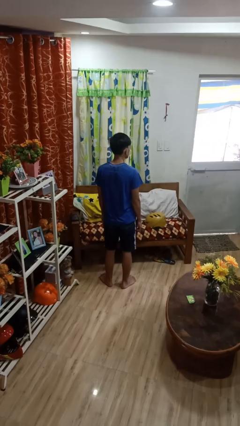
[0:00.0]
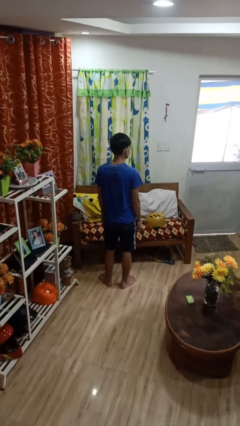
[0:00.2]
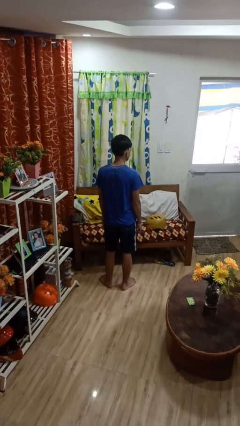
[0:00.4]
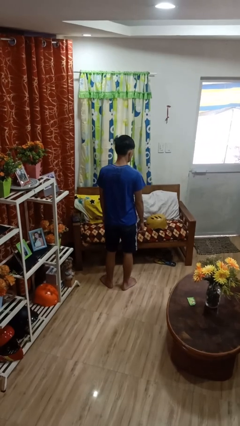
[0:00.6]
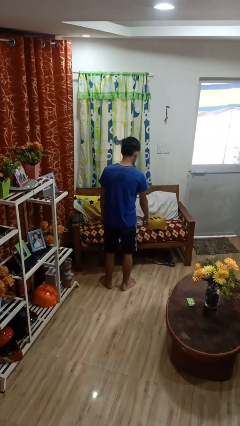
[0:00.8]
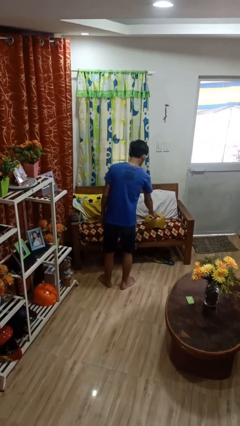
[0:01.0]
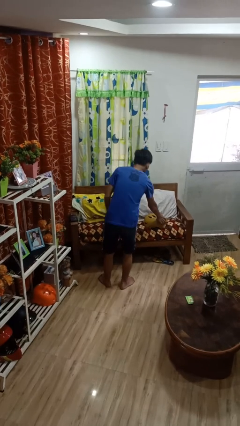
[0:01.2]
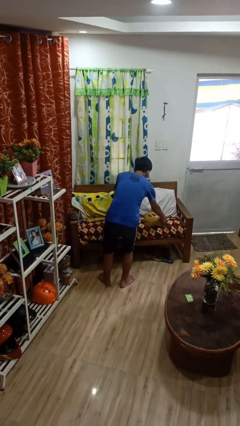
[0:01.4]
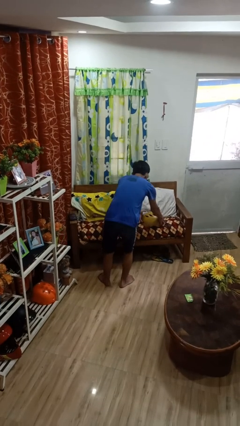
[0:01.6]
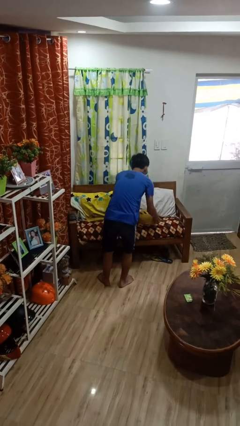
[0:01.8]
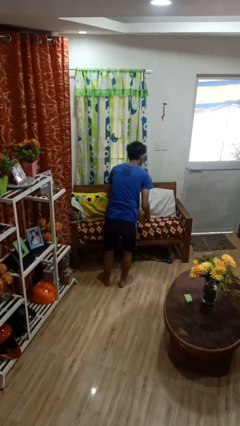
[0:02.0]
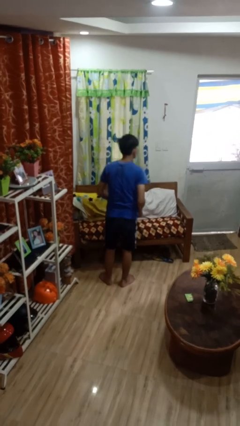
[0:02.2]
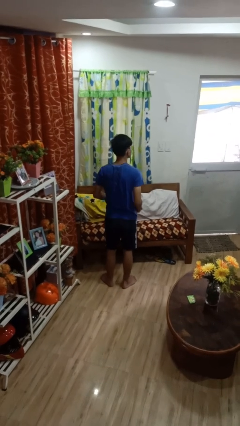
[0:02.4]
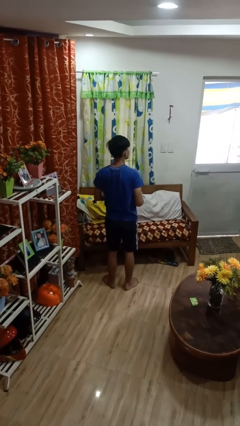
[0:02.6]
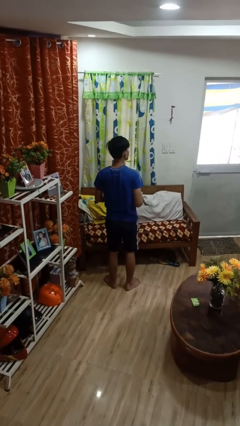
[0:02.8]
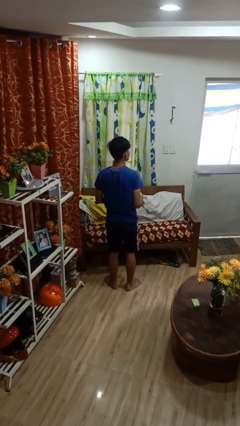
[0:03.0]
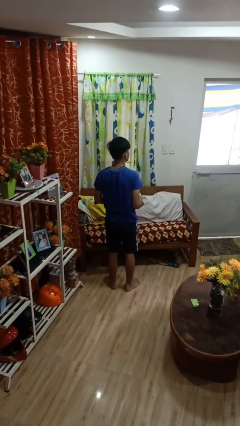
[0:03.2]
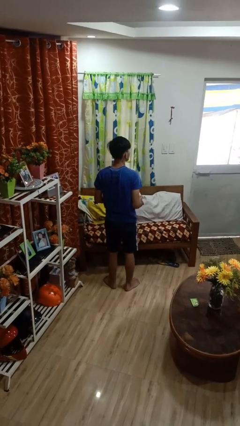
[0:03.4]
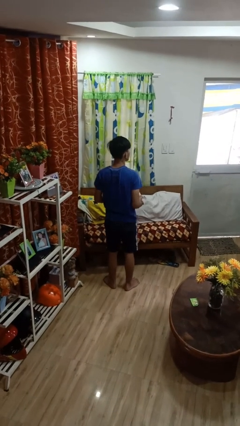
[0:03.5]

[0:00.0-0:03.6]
person picks up object from couch

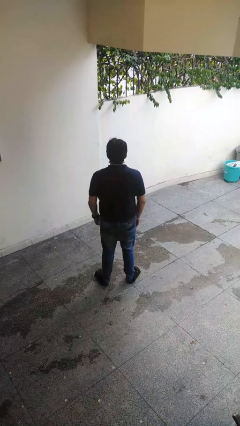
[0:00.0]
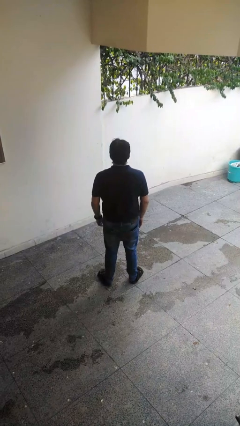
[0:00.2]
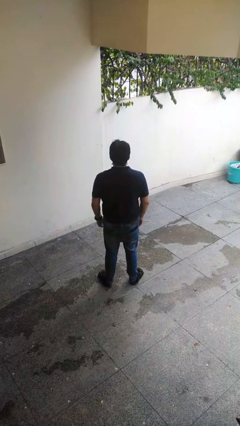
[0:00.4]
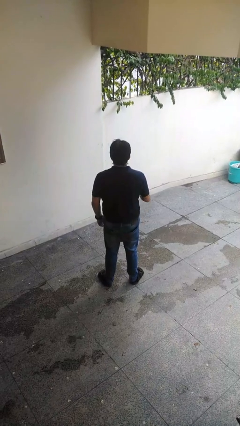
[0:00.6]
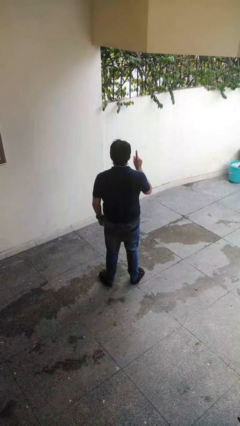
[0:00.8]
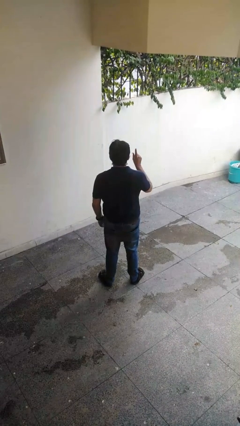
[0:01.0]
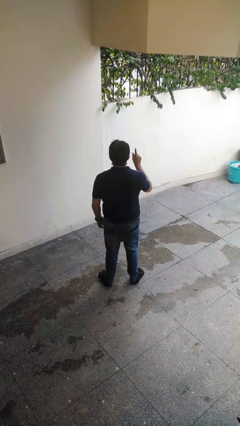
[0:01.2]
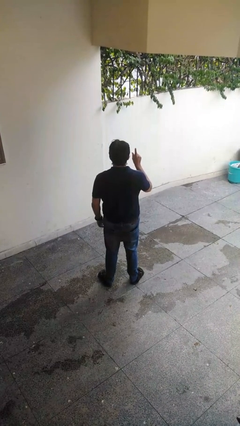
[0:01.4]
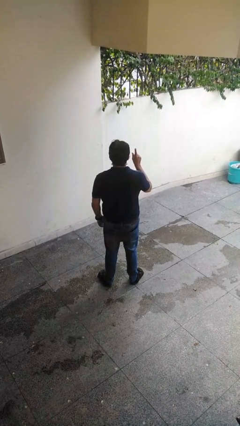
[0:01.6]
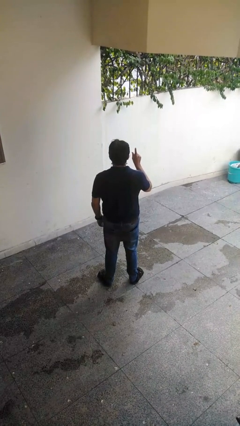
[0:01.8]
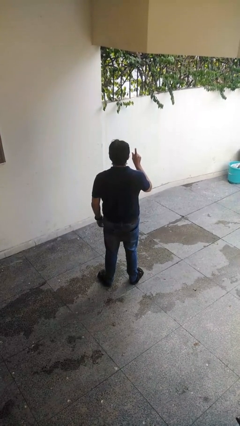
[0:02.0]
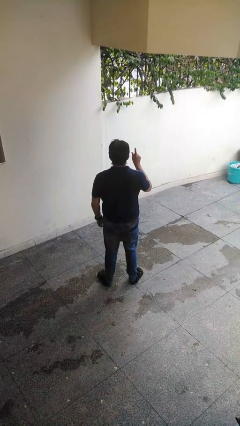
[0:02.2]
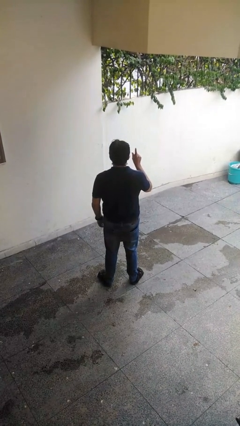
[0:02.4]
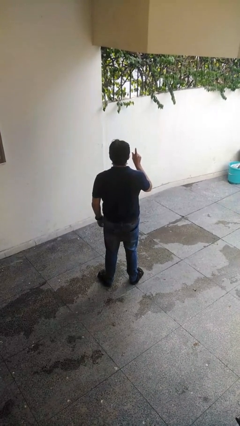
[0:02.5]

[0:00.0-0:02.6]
person gestures number one

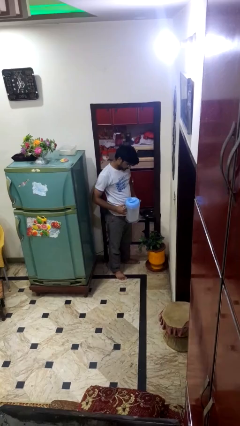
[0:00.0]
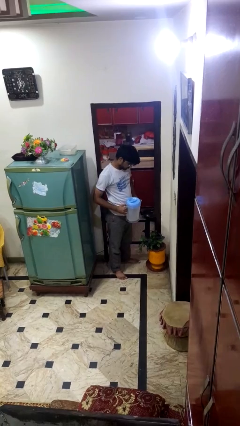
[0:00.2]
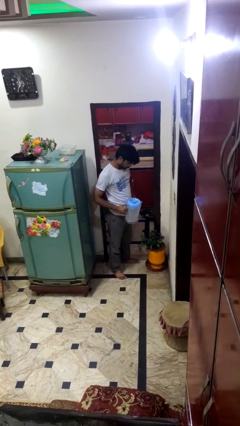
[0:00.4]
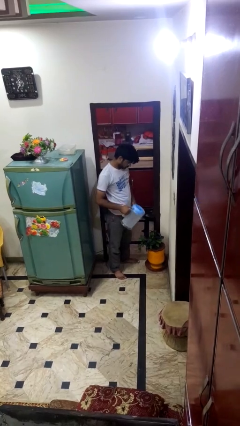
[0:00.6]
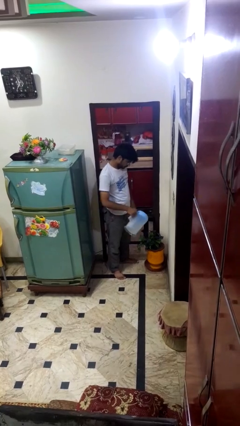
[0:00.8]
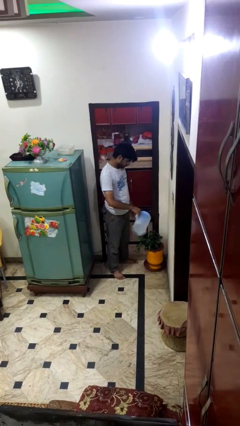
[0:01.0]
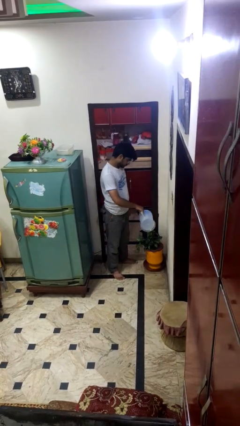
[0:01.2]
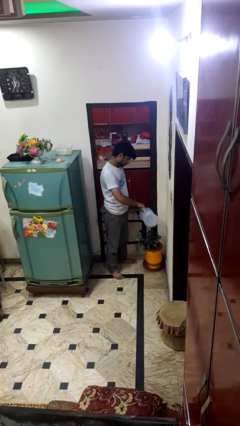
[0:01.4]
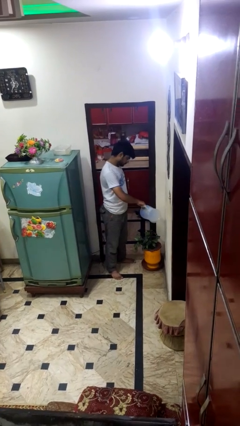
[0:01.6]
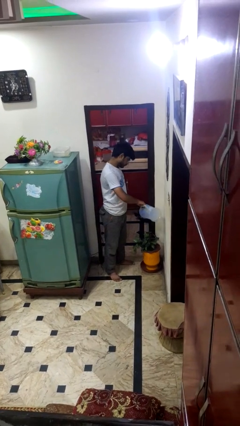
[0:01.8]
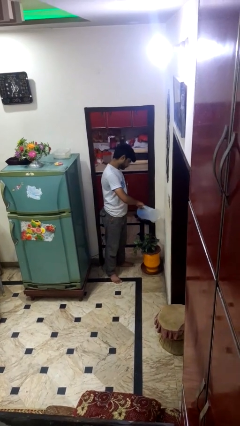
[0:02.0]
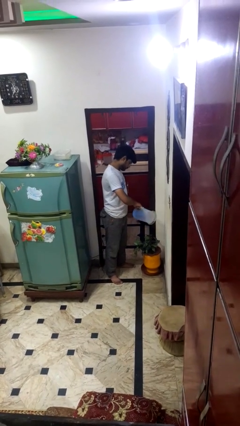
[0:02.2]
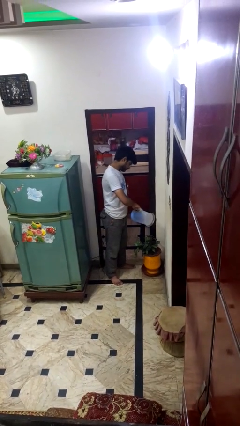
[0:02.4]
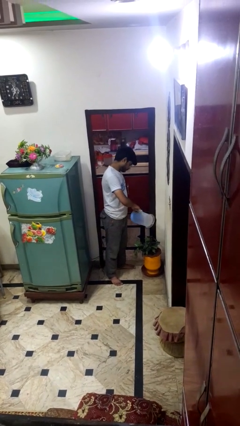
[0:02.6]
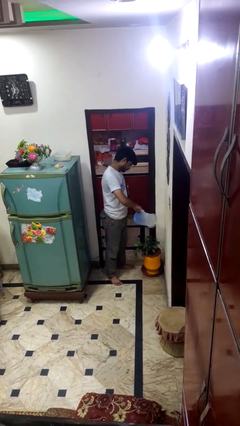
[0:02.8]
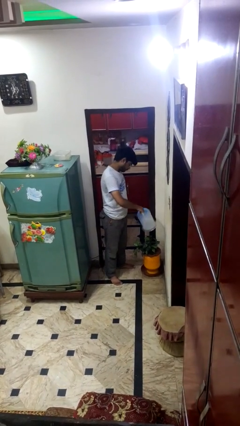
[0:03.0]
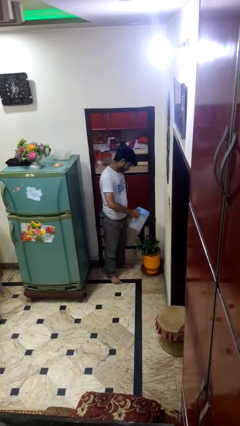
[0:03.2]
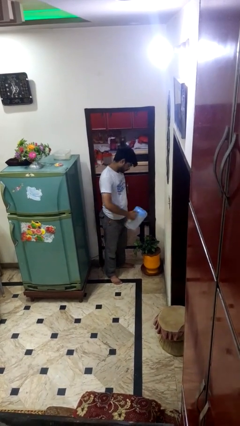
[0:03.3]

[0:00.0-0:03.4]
person waters houseplant

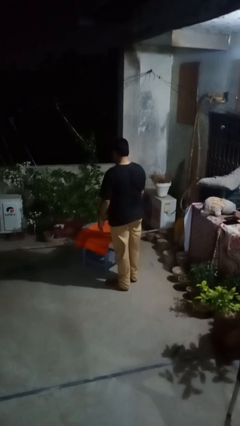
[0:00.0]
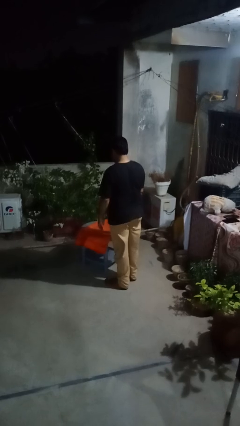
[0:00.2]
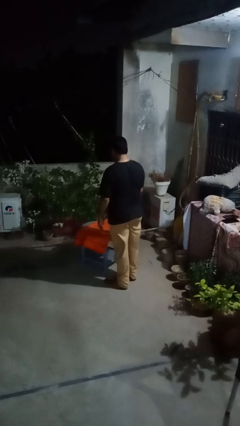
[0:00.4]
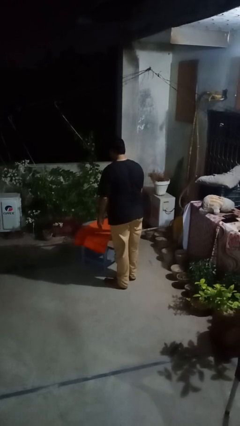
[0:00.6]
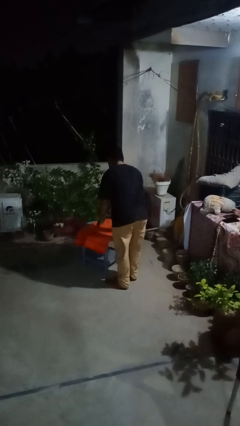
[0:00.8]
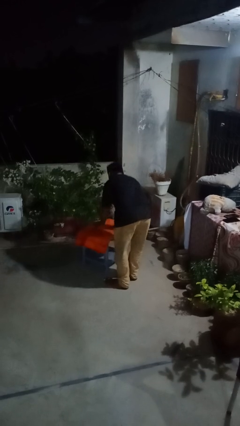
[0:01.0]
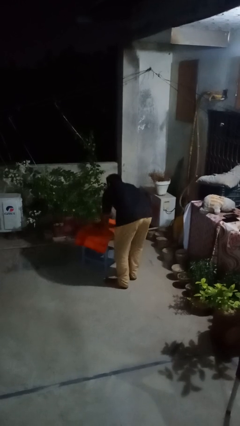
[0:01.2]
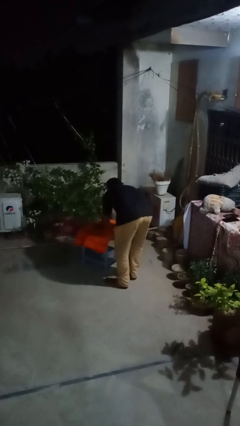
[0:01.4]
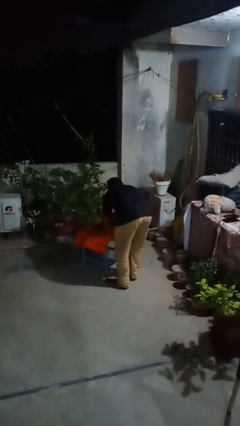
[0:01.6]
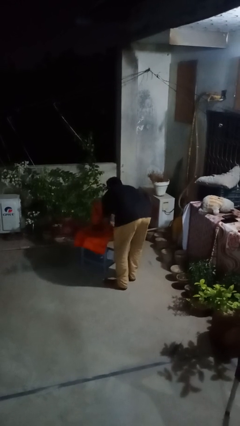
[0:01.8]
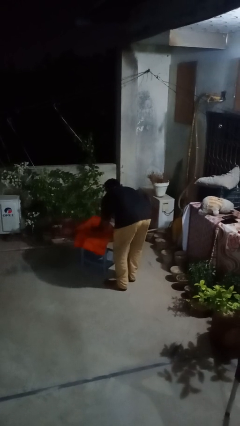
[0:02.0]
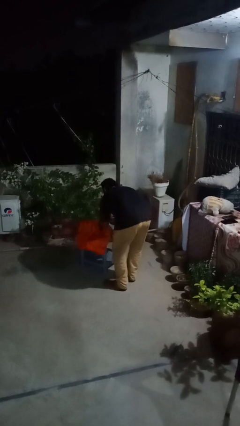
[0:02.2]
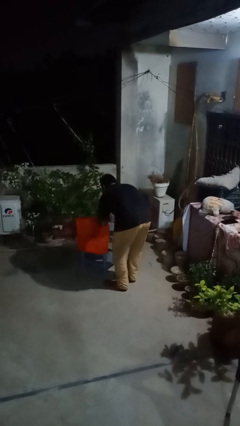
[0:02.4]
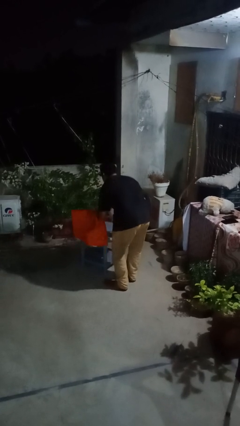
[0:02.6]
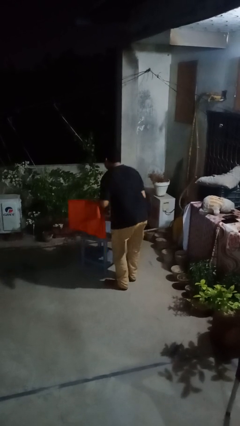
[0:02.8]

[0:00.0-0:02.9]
person folds tablecloth

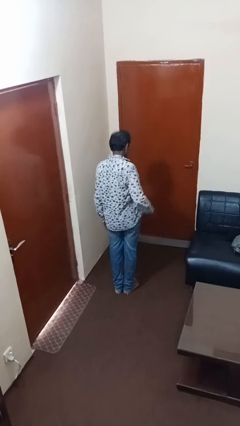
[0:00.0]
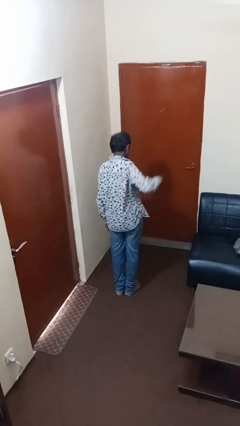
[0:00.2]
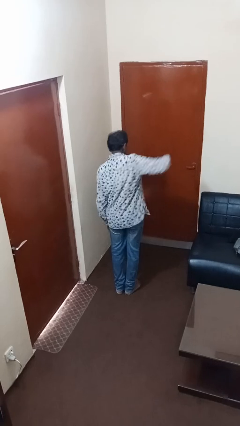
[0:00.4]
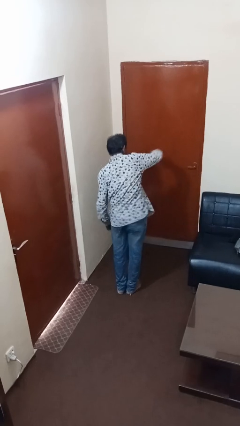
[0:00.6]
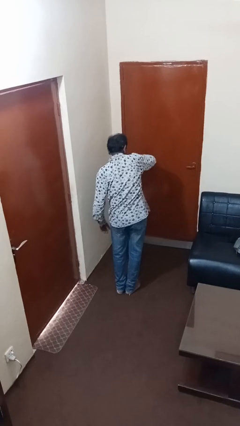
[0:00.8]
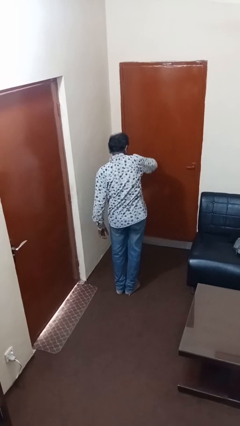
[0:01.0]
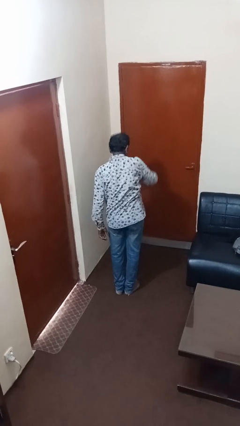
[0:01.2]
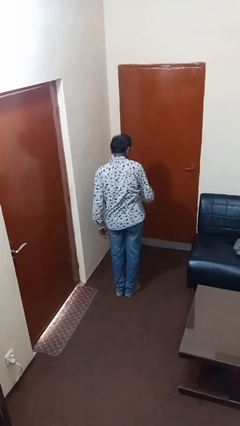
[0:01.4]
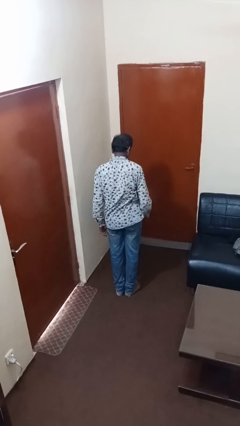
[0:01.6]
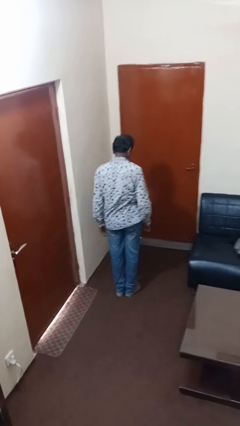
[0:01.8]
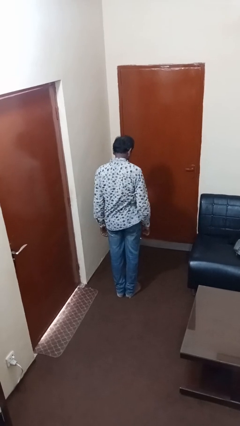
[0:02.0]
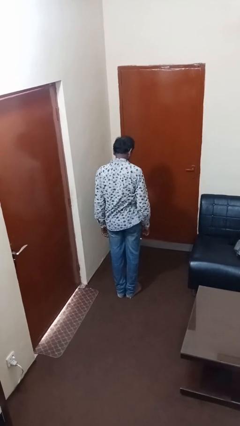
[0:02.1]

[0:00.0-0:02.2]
person karate chop

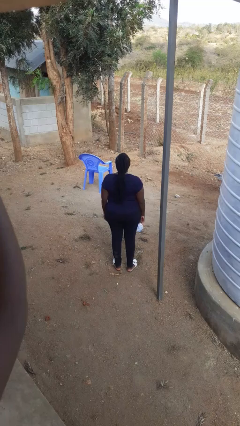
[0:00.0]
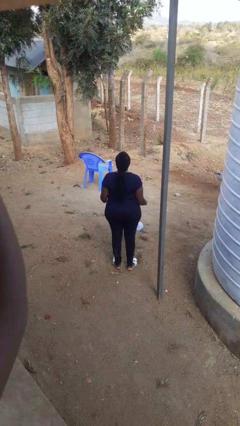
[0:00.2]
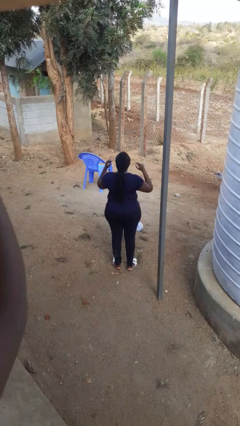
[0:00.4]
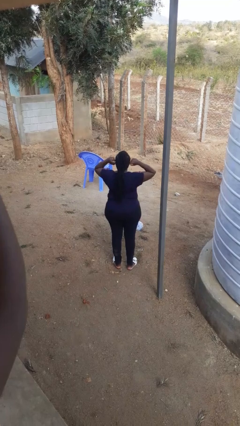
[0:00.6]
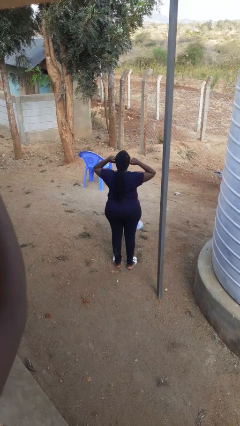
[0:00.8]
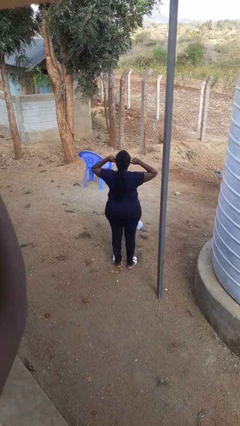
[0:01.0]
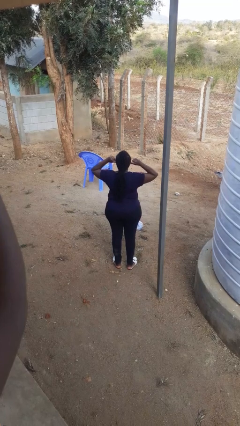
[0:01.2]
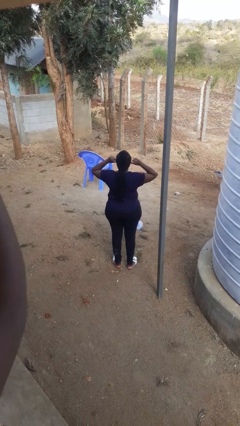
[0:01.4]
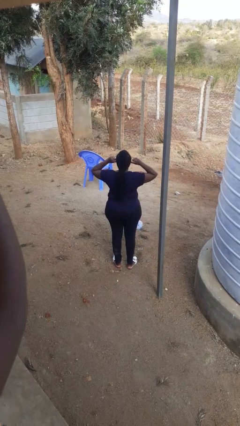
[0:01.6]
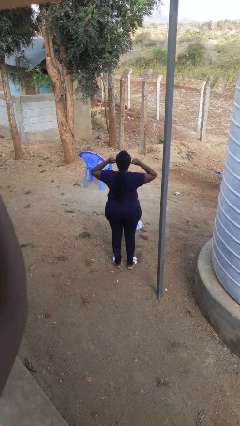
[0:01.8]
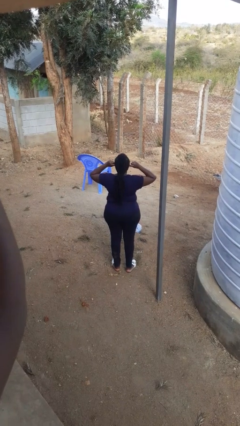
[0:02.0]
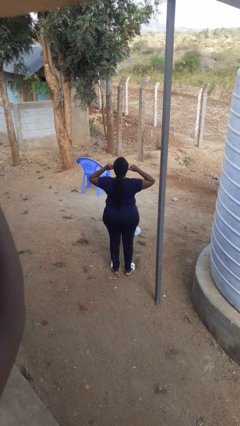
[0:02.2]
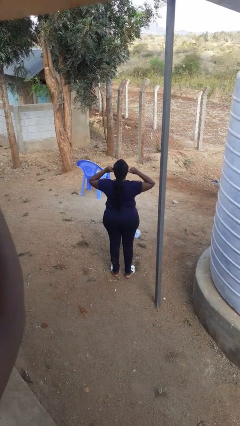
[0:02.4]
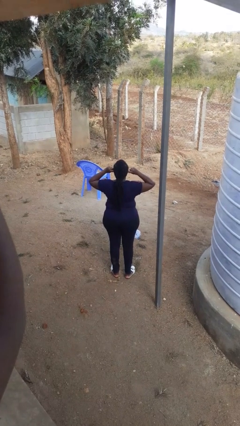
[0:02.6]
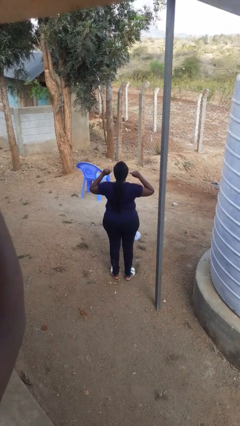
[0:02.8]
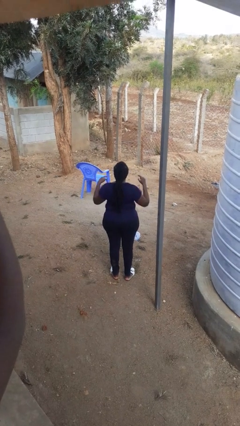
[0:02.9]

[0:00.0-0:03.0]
person puts fingers in ear

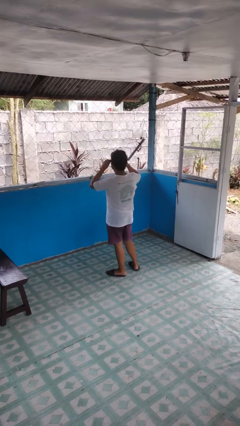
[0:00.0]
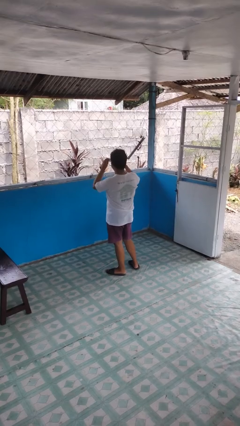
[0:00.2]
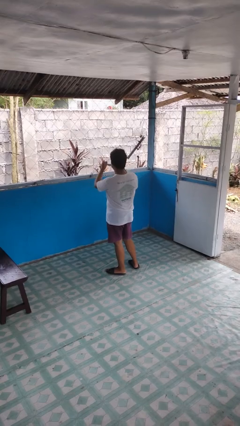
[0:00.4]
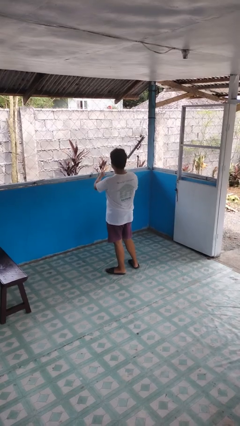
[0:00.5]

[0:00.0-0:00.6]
person takes off sunglasses
